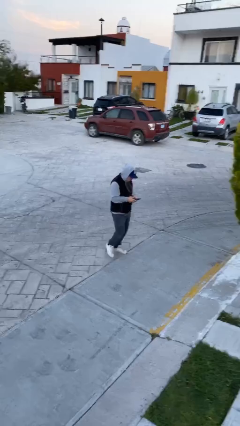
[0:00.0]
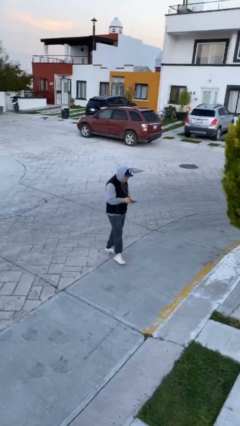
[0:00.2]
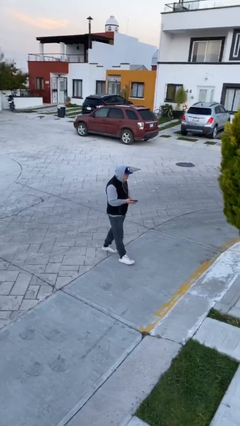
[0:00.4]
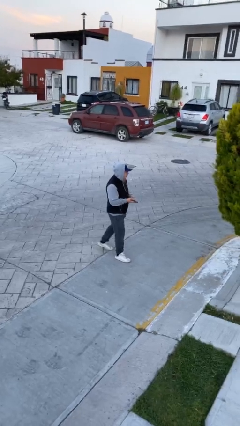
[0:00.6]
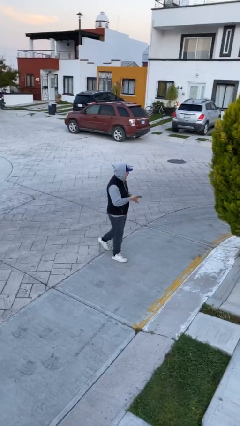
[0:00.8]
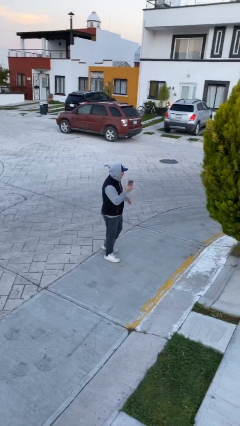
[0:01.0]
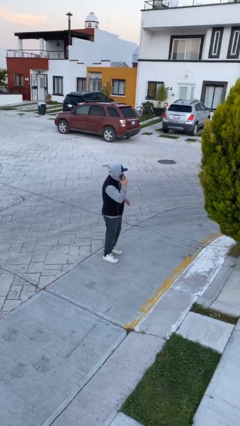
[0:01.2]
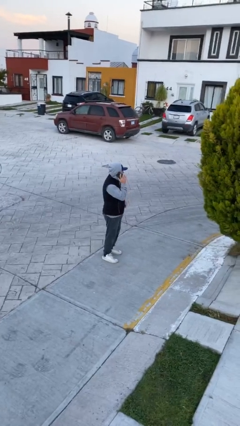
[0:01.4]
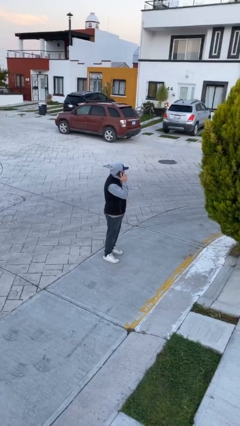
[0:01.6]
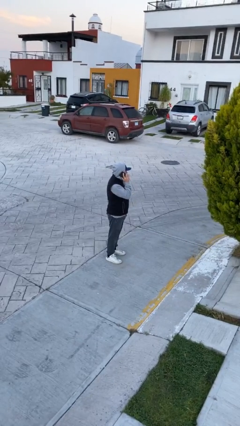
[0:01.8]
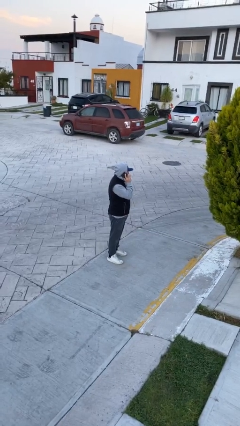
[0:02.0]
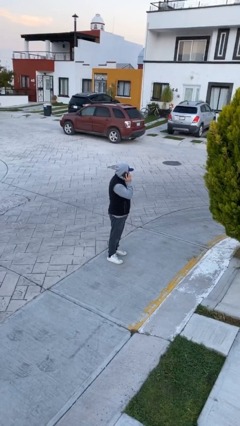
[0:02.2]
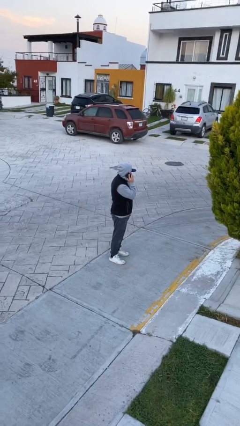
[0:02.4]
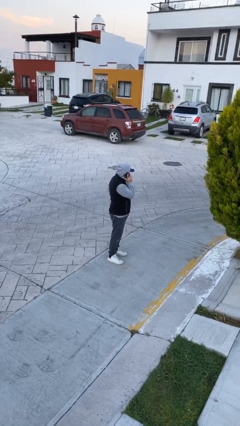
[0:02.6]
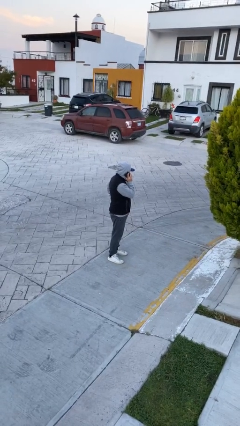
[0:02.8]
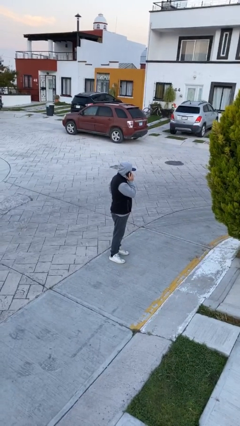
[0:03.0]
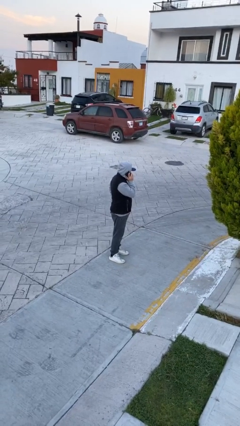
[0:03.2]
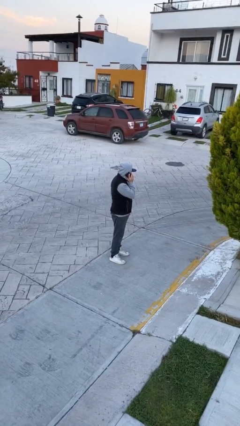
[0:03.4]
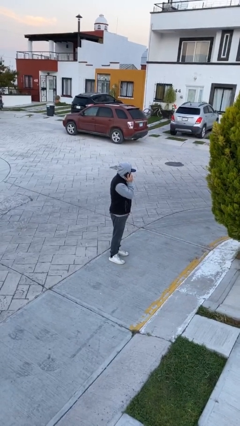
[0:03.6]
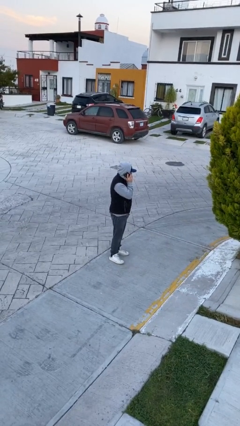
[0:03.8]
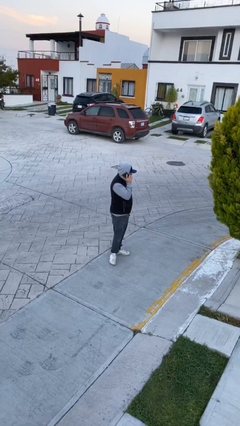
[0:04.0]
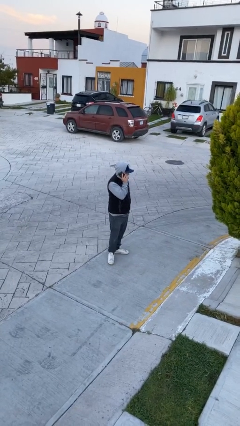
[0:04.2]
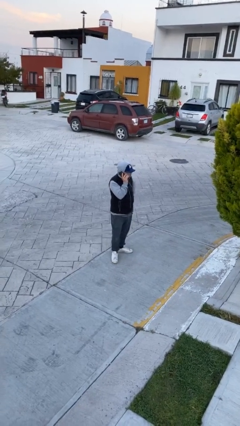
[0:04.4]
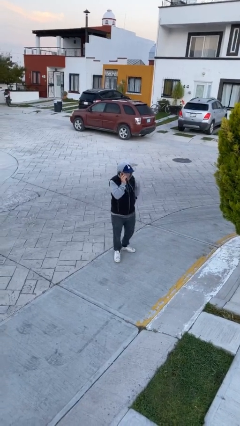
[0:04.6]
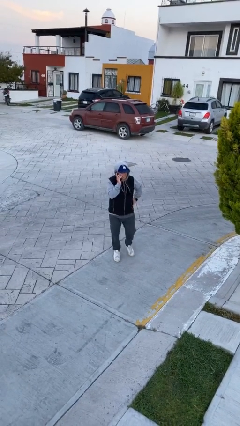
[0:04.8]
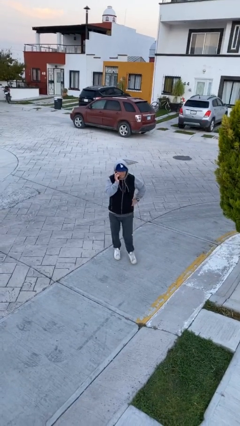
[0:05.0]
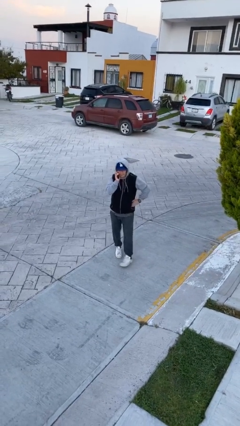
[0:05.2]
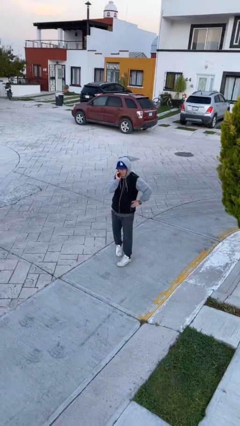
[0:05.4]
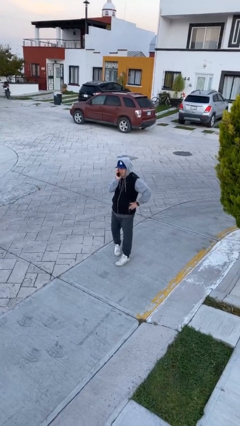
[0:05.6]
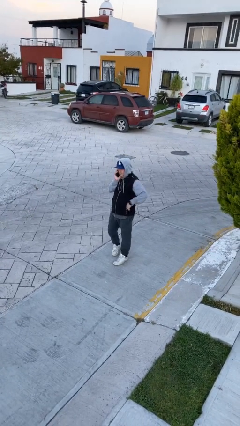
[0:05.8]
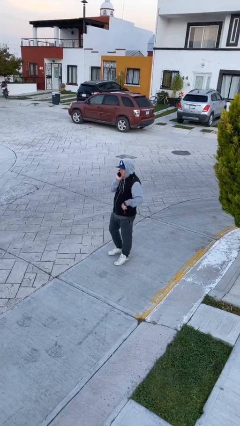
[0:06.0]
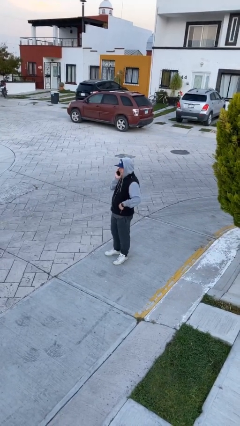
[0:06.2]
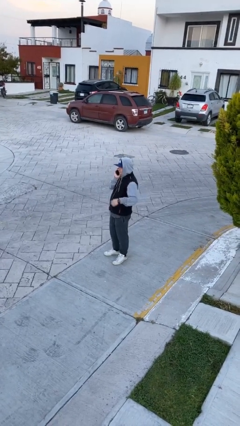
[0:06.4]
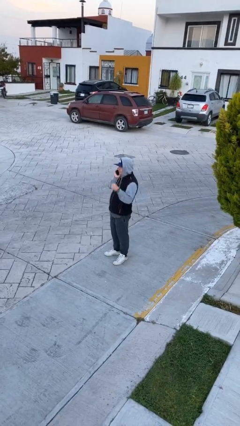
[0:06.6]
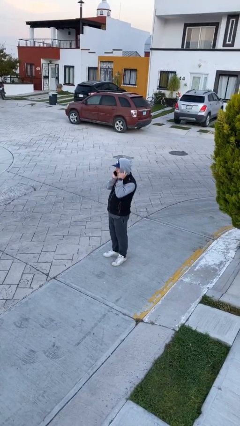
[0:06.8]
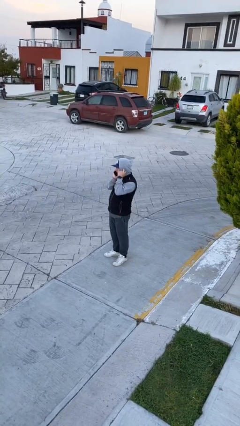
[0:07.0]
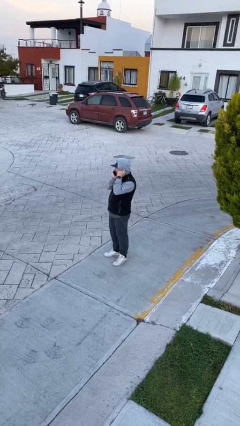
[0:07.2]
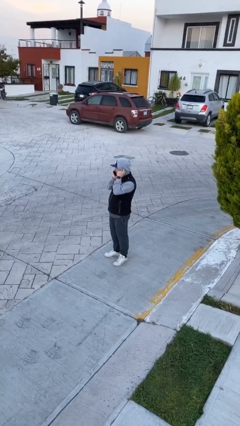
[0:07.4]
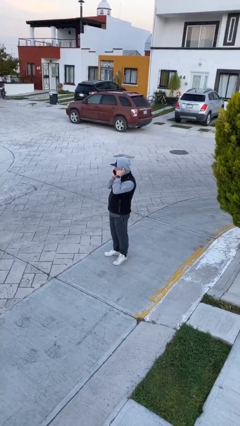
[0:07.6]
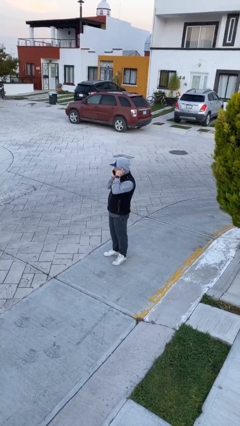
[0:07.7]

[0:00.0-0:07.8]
person talks on phone

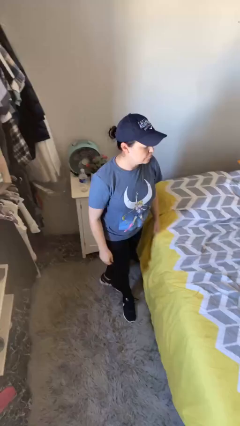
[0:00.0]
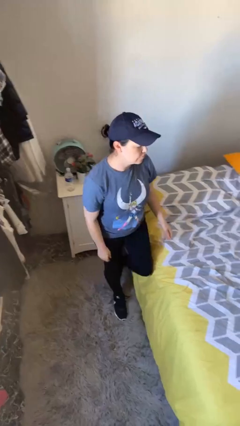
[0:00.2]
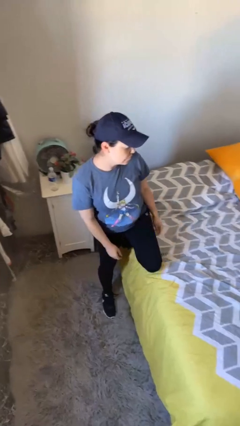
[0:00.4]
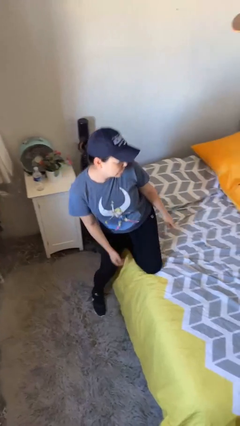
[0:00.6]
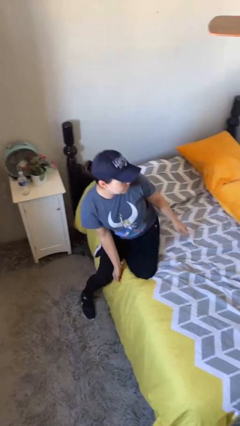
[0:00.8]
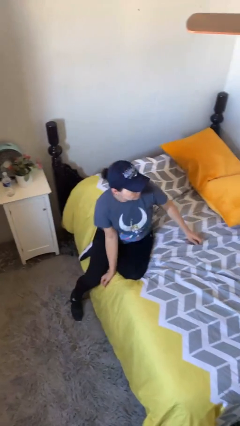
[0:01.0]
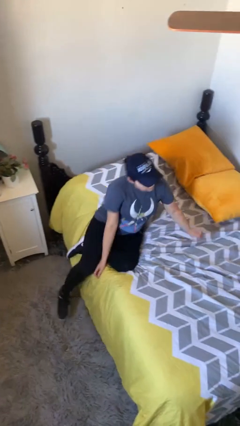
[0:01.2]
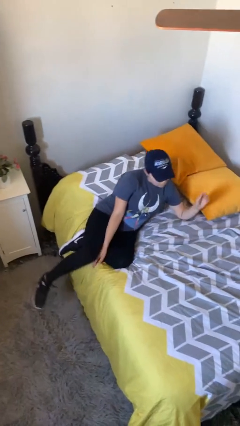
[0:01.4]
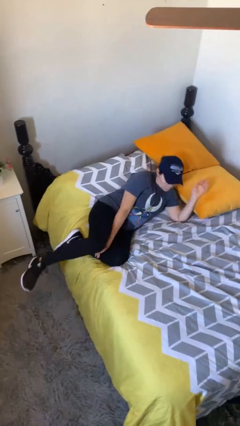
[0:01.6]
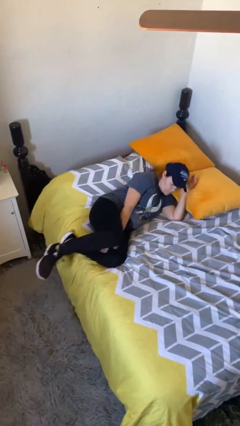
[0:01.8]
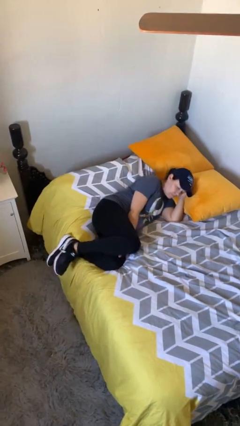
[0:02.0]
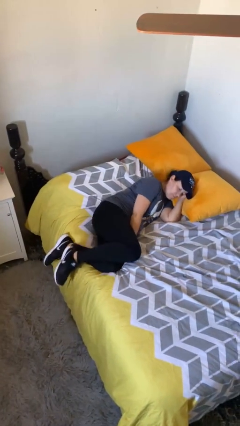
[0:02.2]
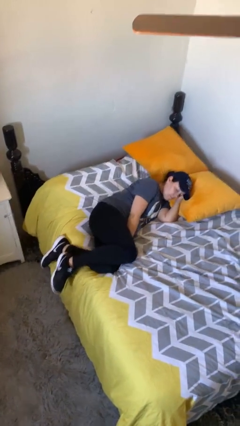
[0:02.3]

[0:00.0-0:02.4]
person lies down on bed

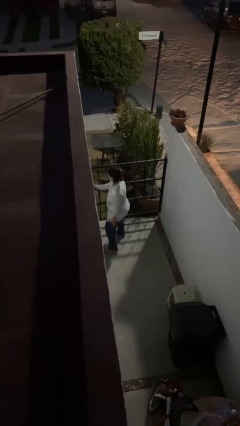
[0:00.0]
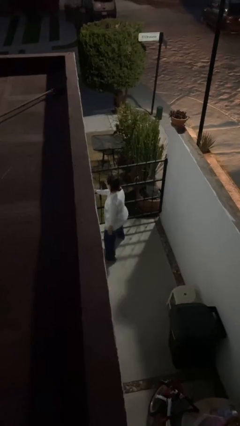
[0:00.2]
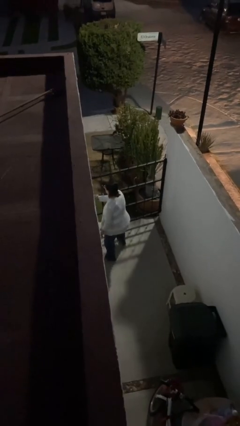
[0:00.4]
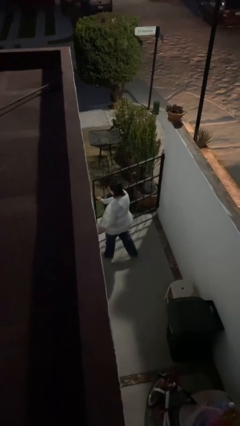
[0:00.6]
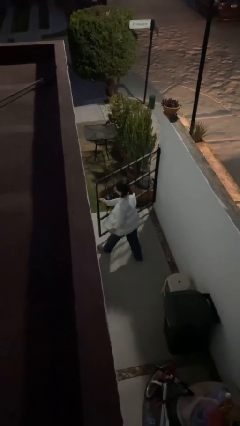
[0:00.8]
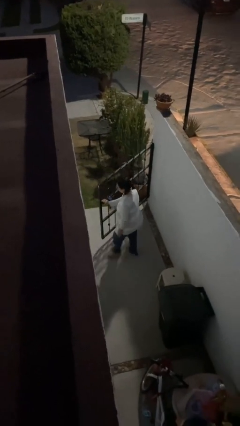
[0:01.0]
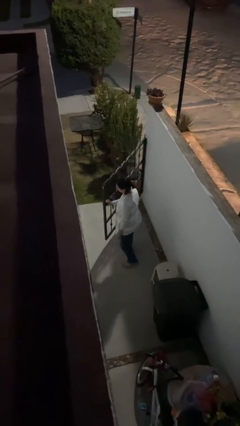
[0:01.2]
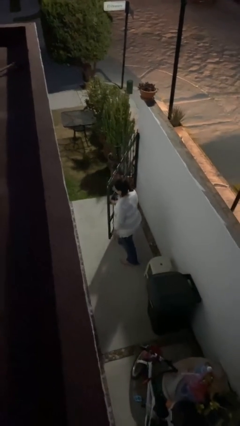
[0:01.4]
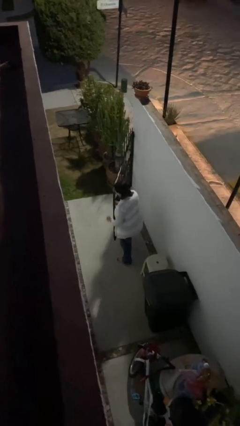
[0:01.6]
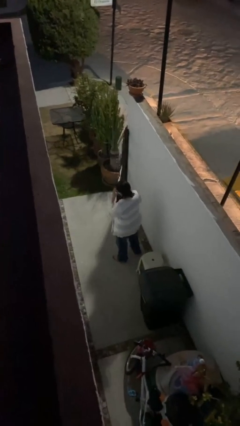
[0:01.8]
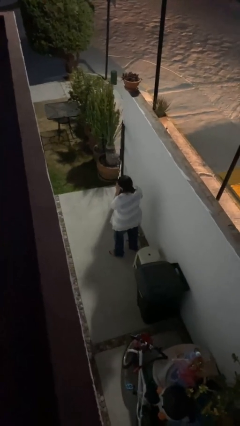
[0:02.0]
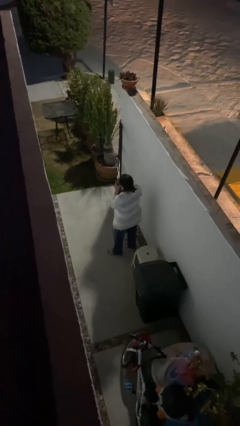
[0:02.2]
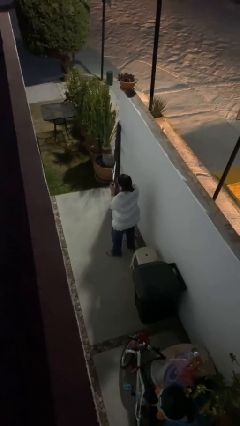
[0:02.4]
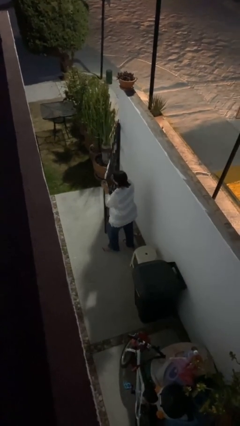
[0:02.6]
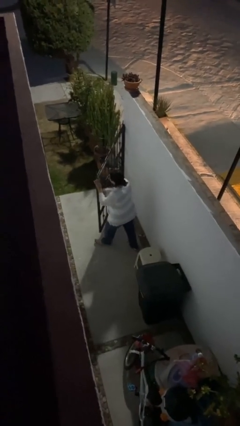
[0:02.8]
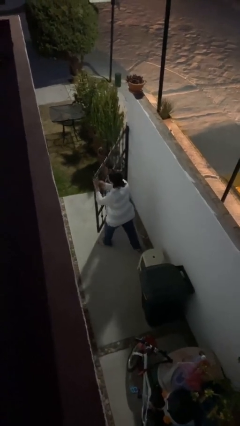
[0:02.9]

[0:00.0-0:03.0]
person opens facility door

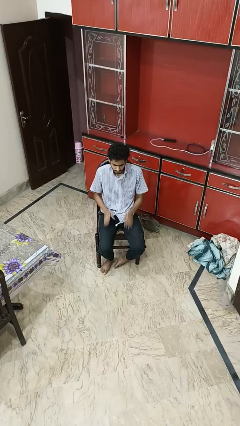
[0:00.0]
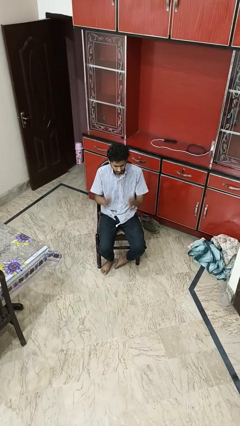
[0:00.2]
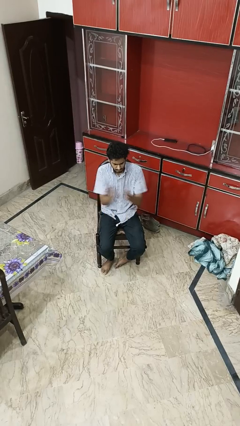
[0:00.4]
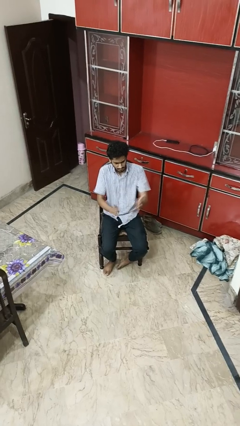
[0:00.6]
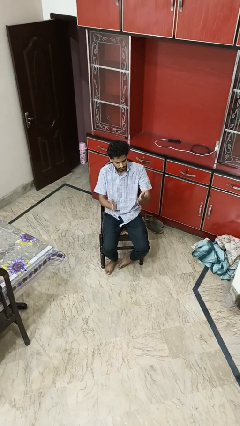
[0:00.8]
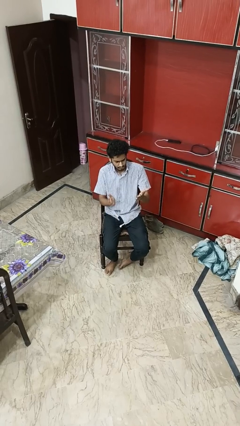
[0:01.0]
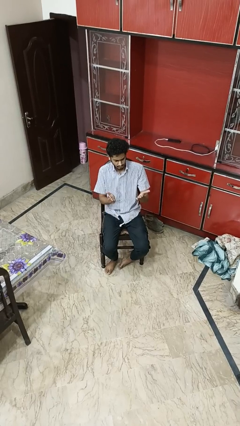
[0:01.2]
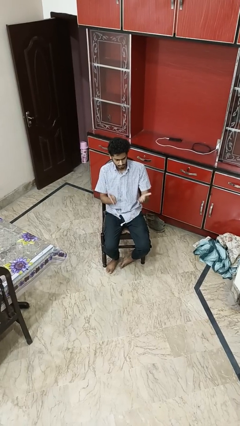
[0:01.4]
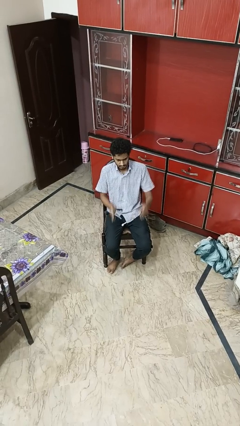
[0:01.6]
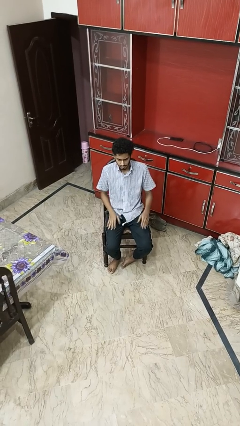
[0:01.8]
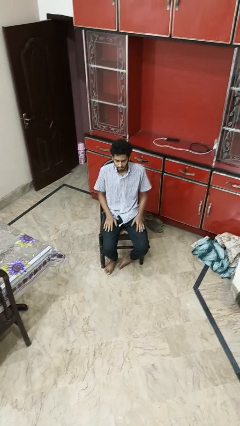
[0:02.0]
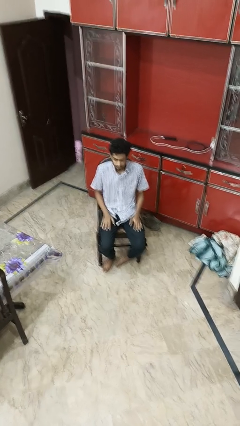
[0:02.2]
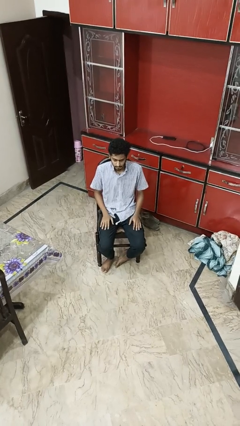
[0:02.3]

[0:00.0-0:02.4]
person swats bug

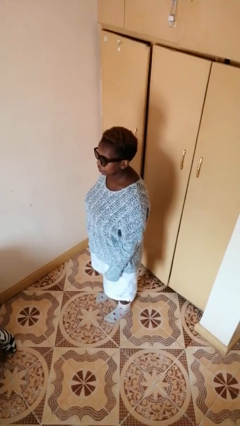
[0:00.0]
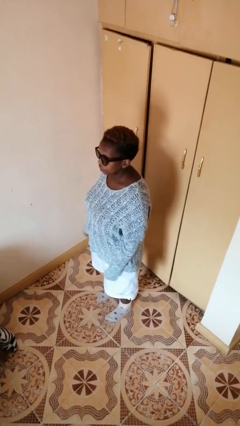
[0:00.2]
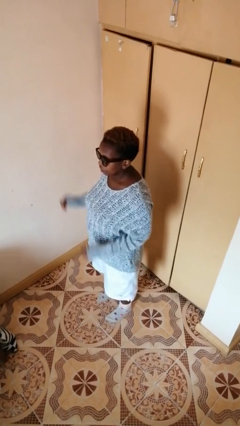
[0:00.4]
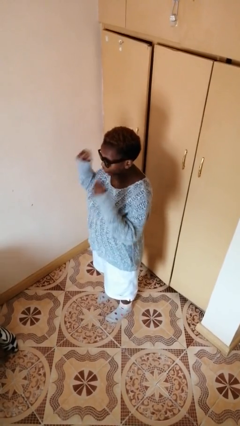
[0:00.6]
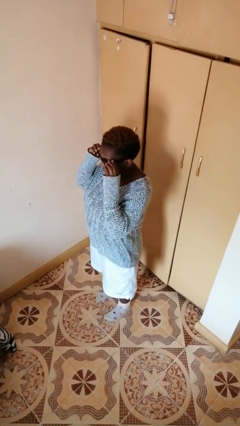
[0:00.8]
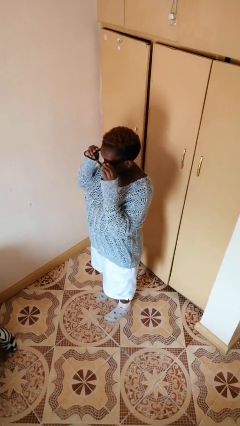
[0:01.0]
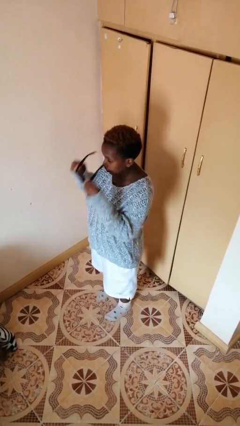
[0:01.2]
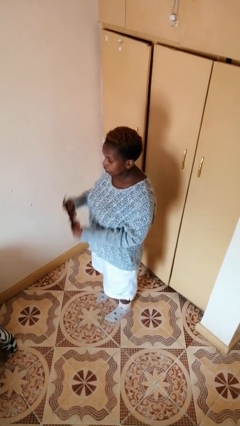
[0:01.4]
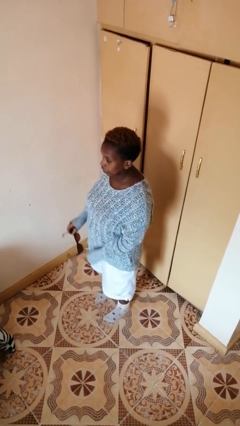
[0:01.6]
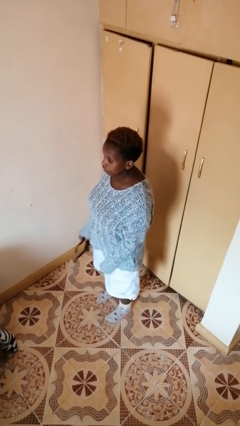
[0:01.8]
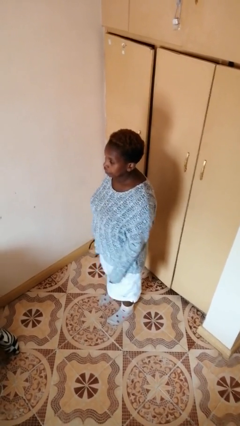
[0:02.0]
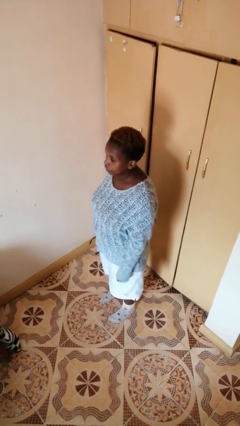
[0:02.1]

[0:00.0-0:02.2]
person takes off sunglasses

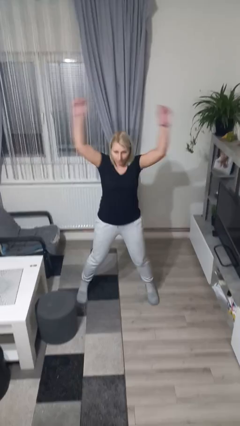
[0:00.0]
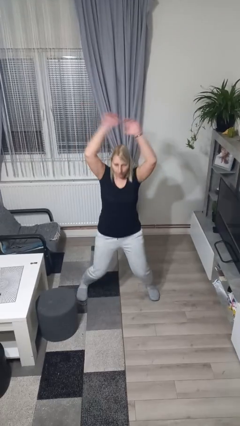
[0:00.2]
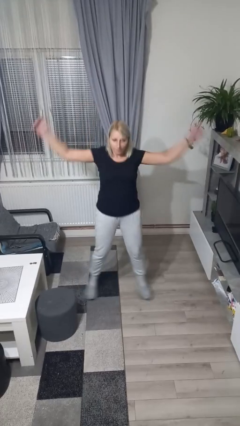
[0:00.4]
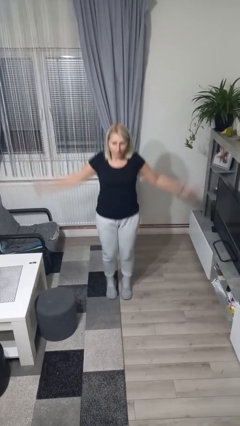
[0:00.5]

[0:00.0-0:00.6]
person exercises with jumping jacks
